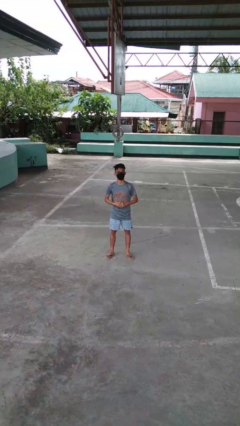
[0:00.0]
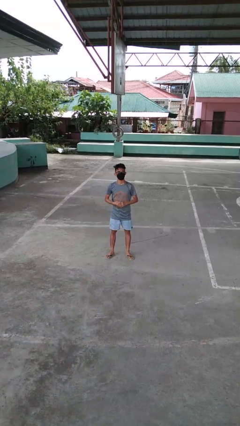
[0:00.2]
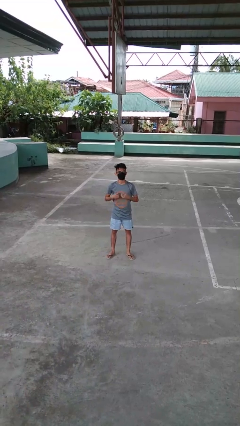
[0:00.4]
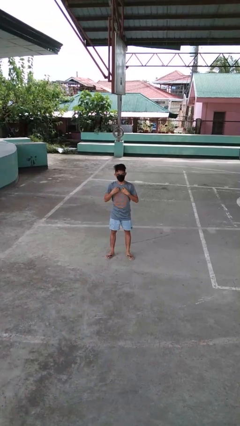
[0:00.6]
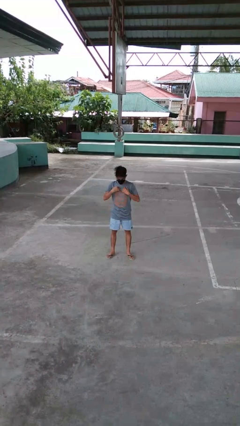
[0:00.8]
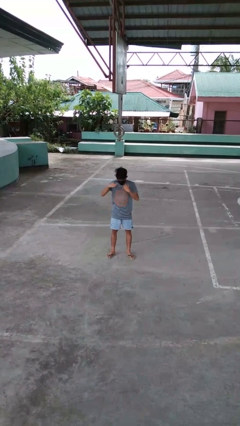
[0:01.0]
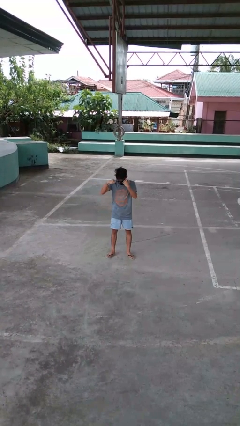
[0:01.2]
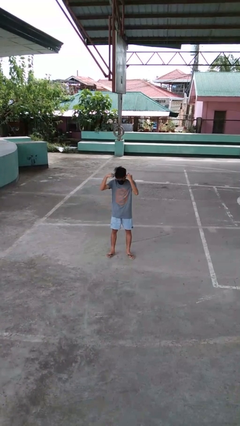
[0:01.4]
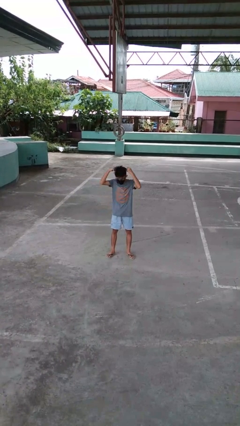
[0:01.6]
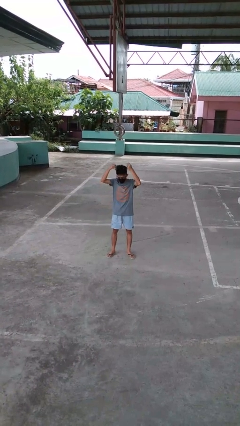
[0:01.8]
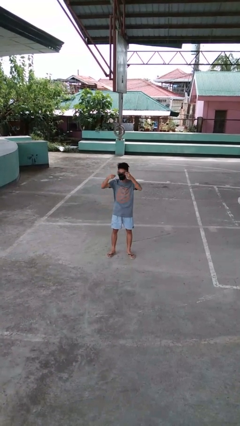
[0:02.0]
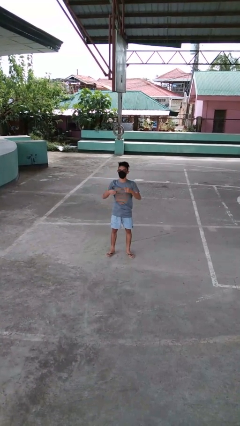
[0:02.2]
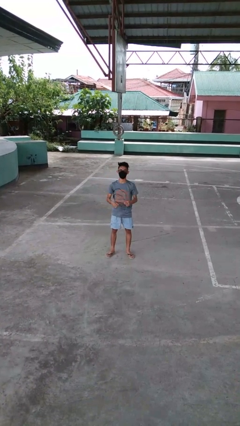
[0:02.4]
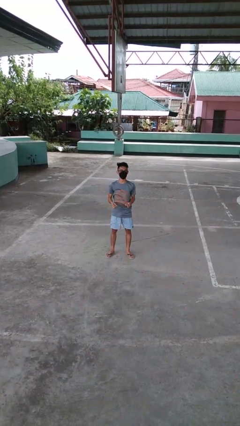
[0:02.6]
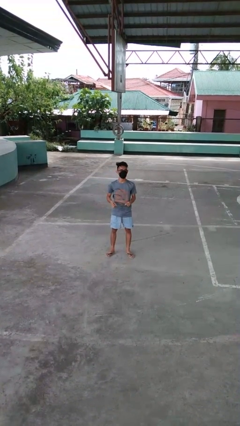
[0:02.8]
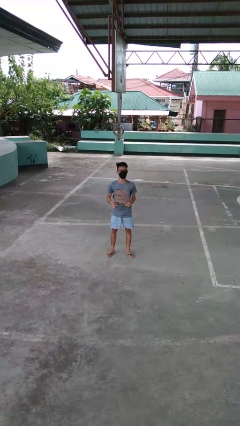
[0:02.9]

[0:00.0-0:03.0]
person takes off necklace

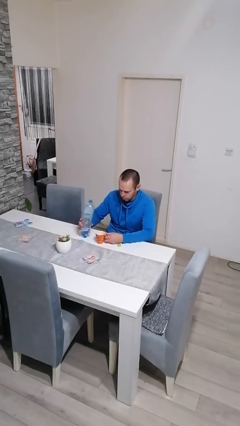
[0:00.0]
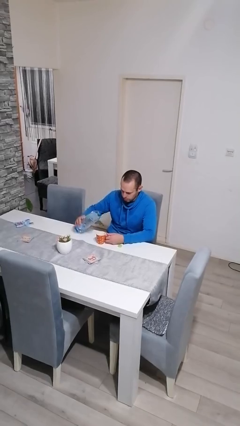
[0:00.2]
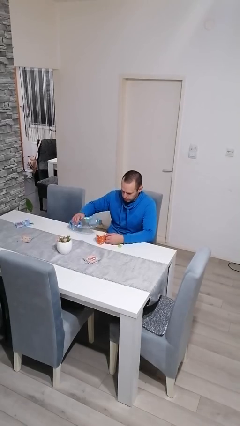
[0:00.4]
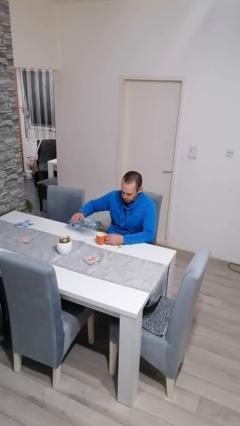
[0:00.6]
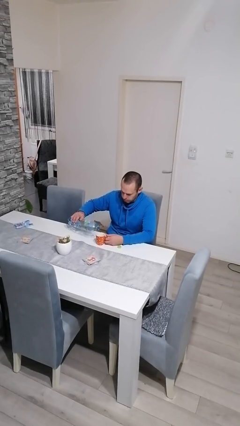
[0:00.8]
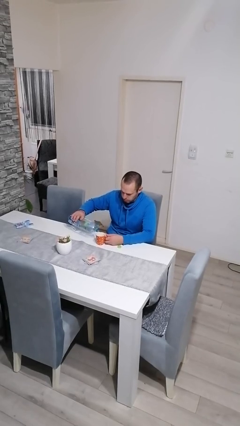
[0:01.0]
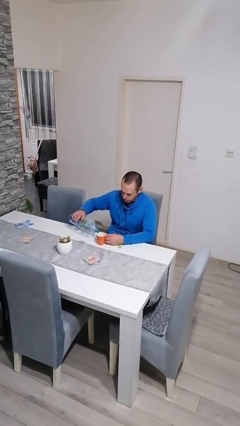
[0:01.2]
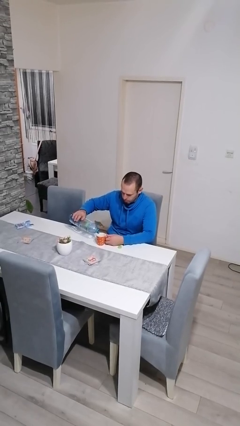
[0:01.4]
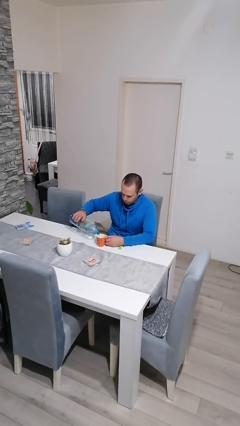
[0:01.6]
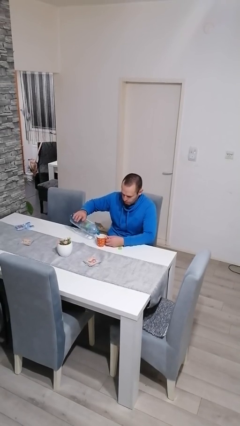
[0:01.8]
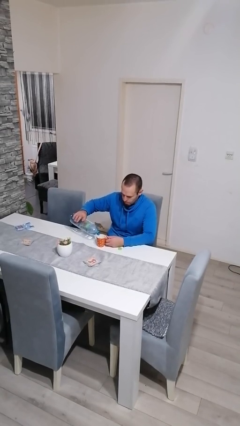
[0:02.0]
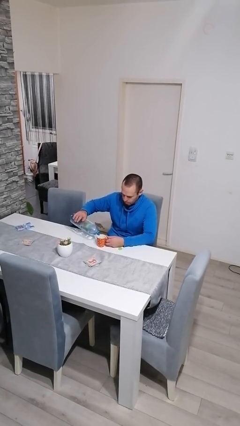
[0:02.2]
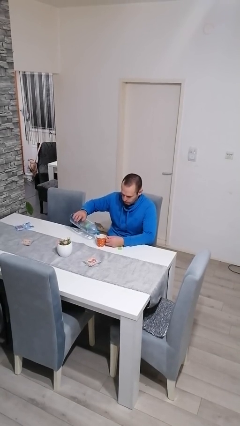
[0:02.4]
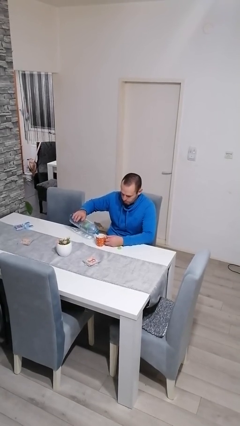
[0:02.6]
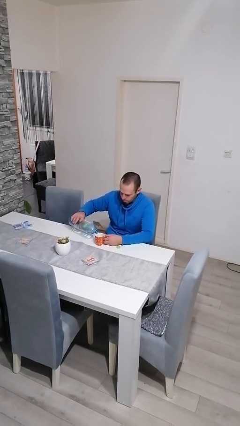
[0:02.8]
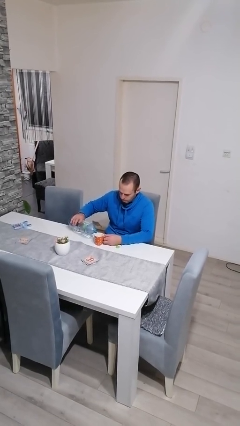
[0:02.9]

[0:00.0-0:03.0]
person pours liquid into cup

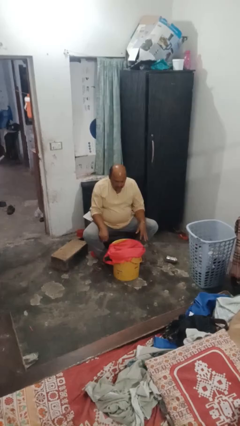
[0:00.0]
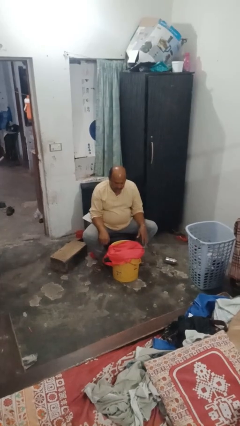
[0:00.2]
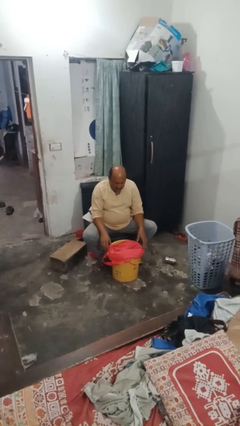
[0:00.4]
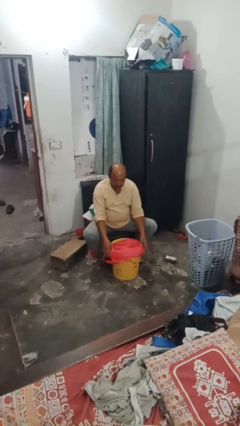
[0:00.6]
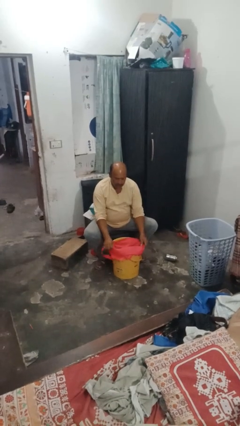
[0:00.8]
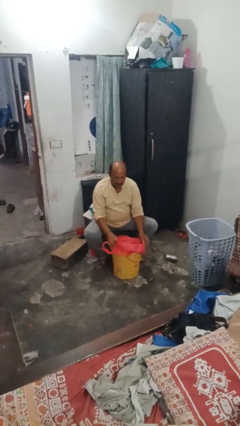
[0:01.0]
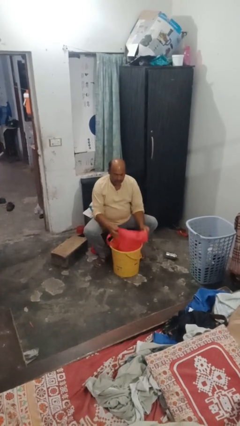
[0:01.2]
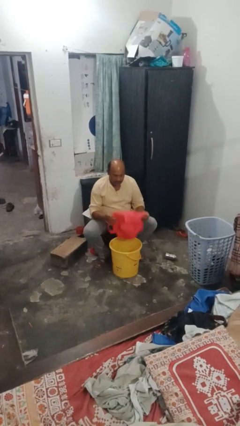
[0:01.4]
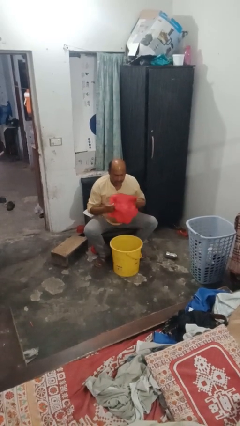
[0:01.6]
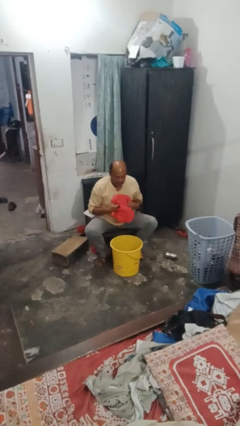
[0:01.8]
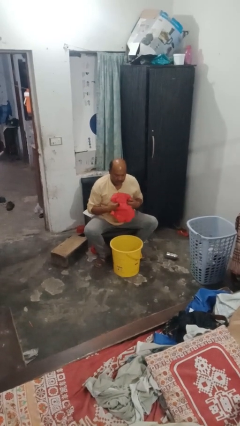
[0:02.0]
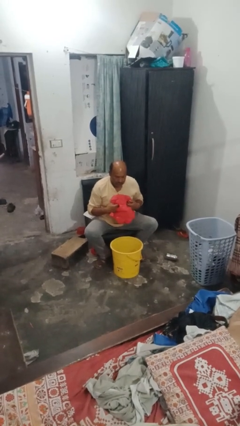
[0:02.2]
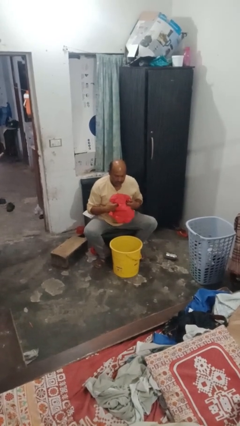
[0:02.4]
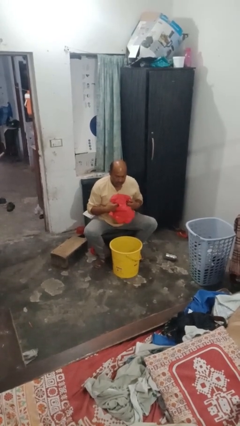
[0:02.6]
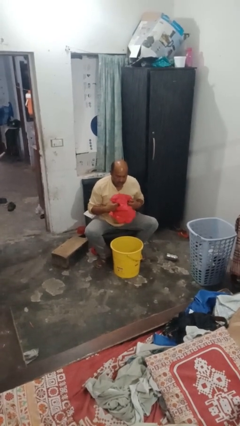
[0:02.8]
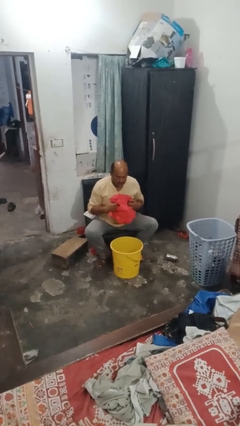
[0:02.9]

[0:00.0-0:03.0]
person removes trashbag from trashcan

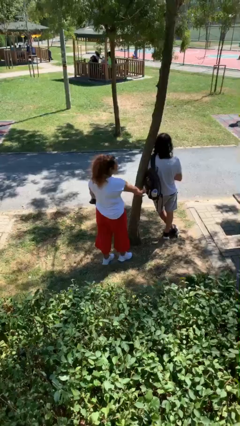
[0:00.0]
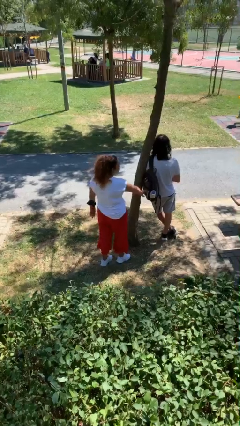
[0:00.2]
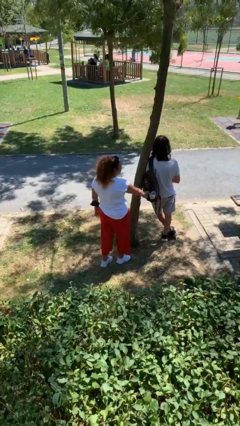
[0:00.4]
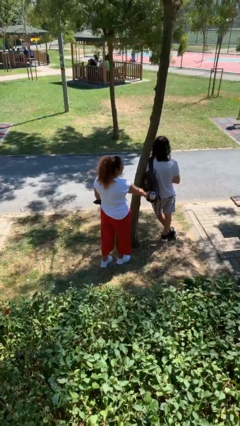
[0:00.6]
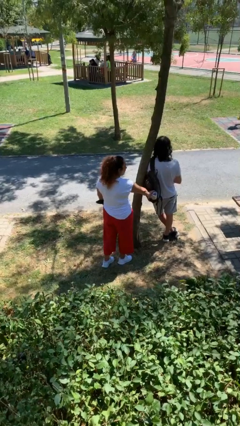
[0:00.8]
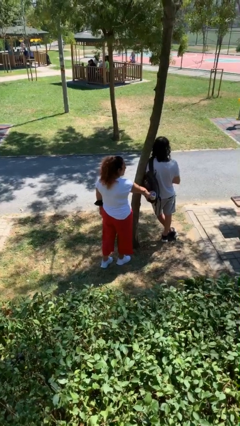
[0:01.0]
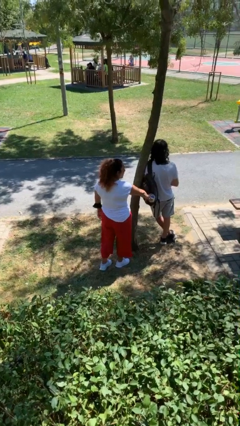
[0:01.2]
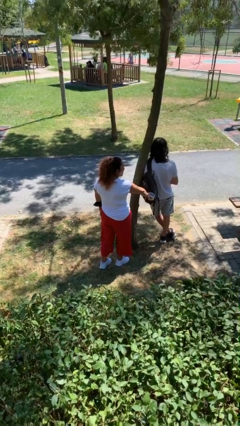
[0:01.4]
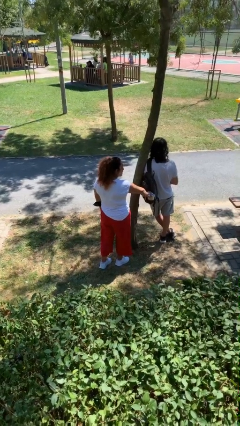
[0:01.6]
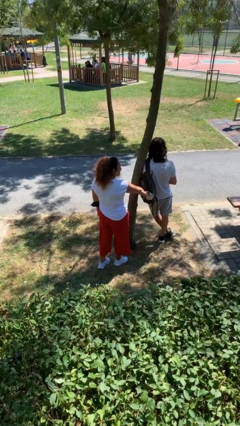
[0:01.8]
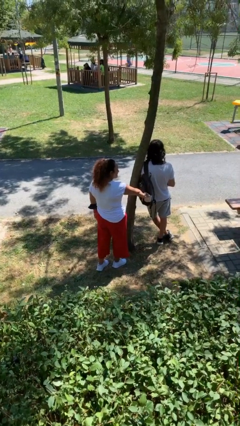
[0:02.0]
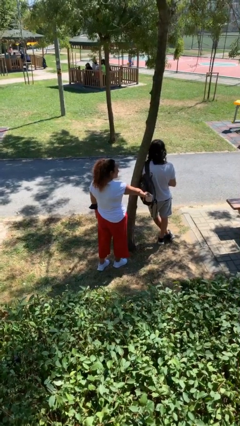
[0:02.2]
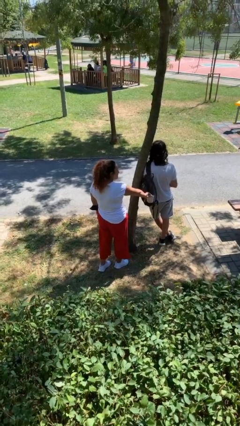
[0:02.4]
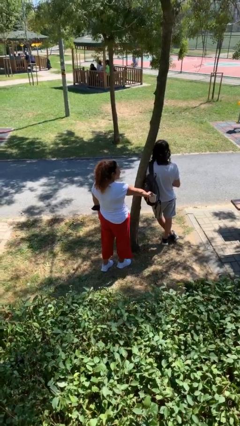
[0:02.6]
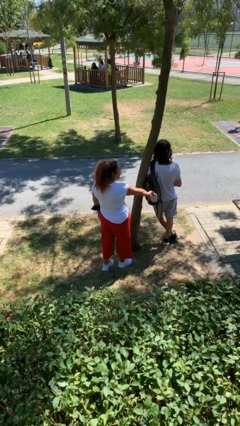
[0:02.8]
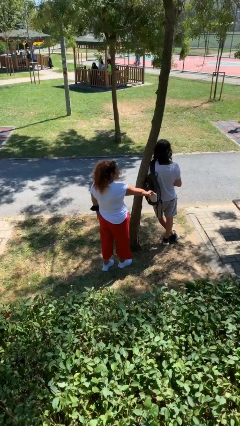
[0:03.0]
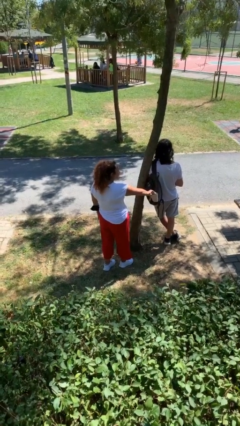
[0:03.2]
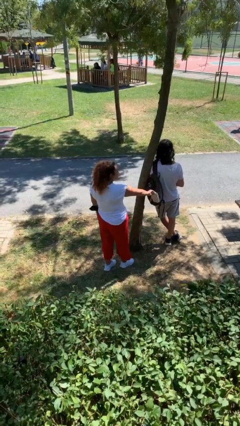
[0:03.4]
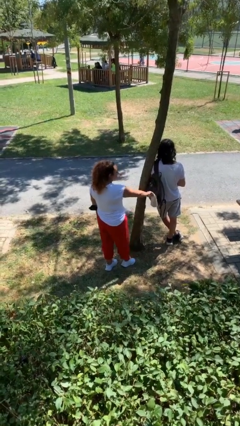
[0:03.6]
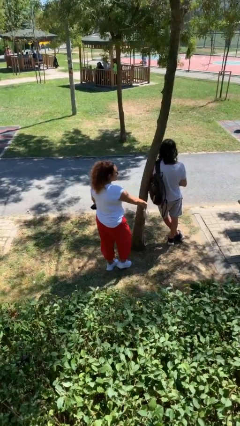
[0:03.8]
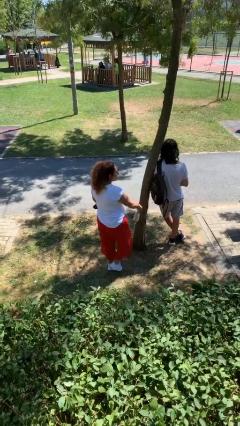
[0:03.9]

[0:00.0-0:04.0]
person steals object from person

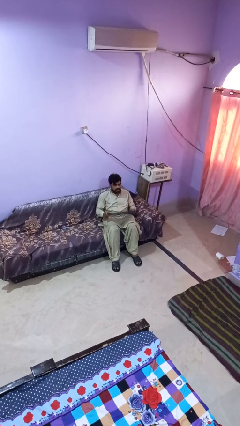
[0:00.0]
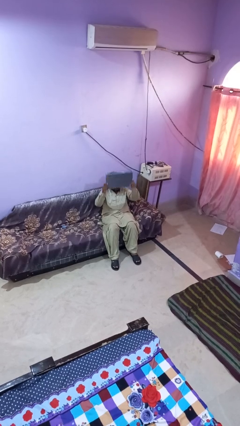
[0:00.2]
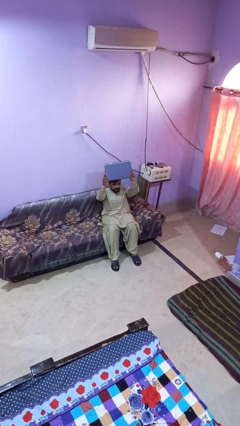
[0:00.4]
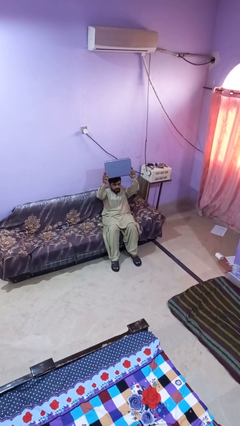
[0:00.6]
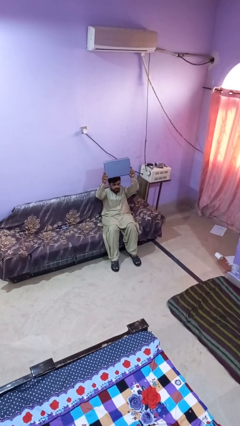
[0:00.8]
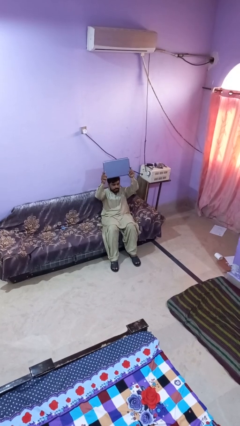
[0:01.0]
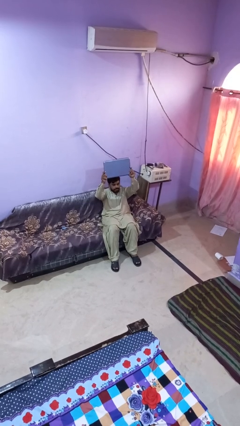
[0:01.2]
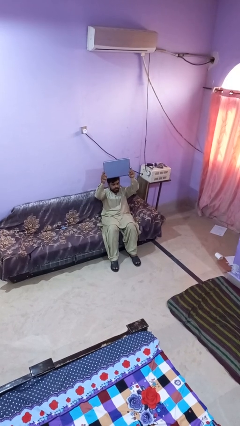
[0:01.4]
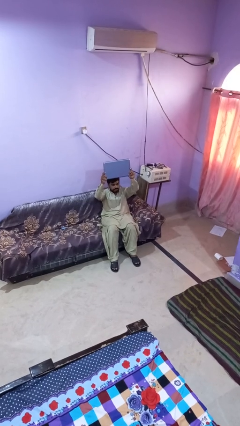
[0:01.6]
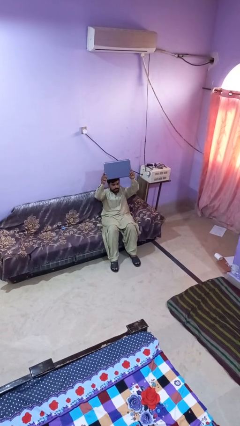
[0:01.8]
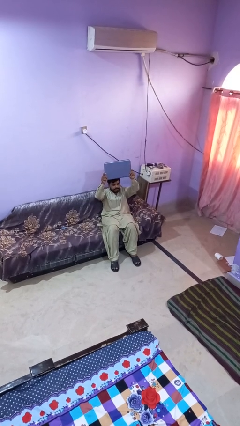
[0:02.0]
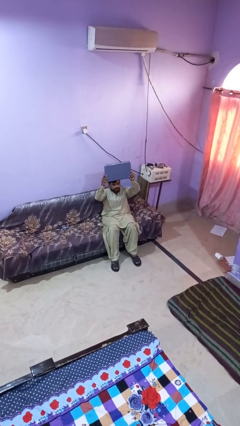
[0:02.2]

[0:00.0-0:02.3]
person holds object above head

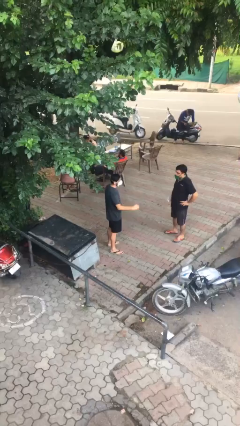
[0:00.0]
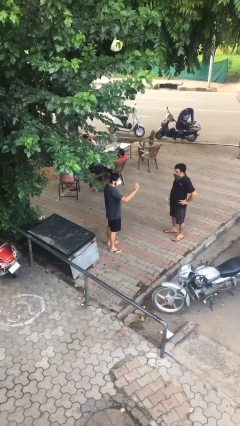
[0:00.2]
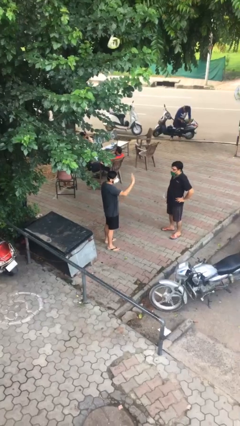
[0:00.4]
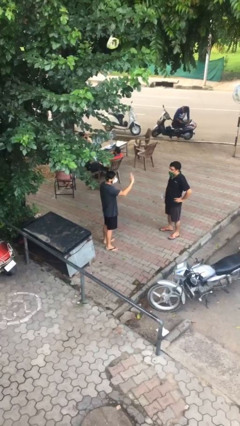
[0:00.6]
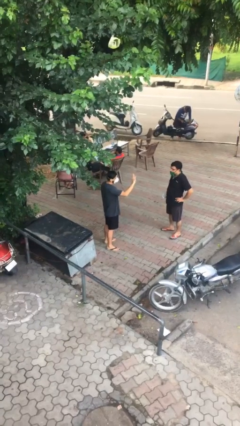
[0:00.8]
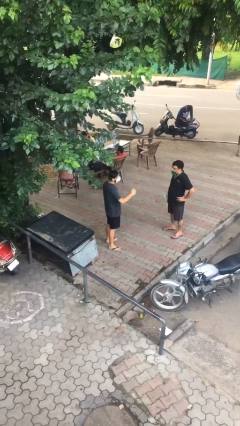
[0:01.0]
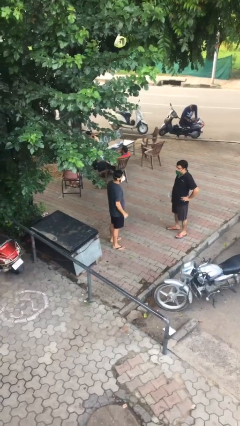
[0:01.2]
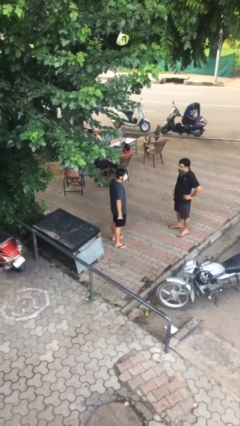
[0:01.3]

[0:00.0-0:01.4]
person waves at person

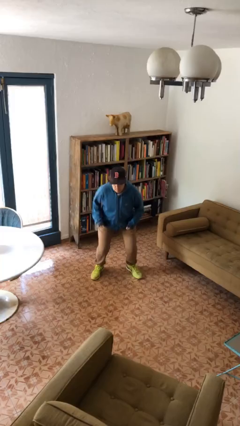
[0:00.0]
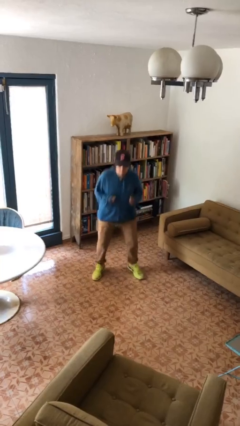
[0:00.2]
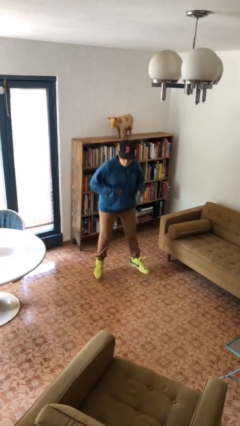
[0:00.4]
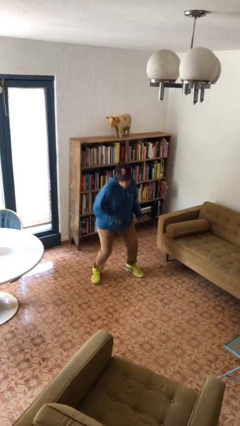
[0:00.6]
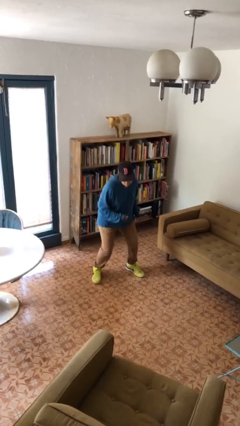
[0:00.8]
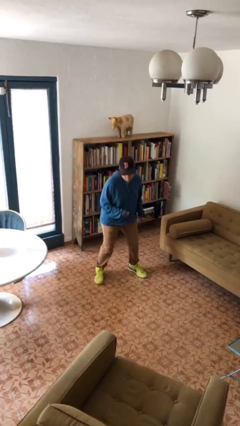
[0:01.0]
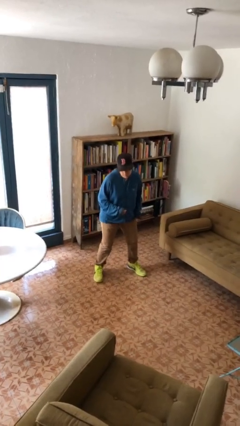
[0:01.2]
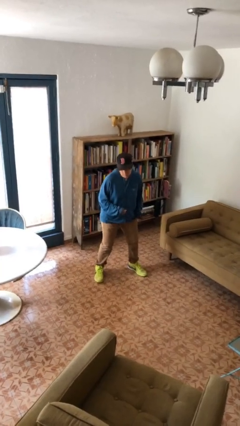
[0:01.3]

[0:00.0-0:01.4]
person jumps
